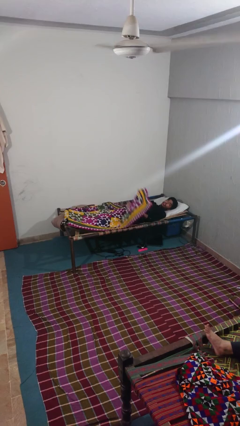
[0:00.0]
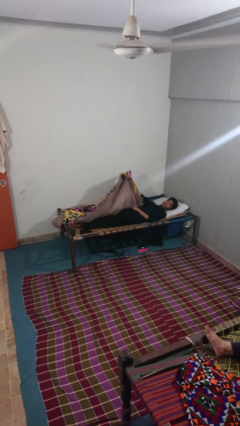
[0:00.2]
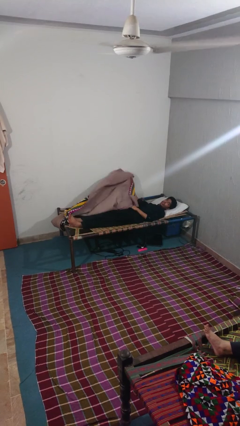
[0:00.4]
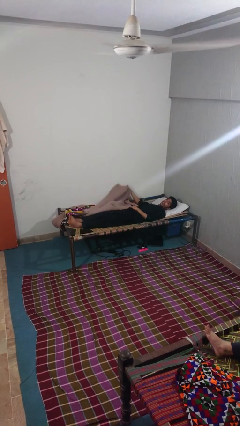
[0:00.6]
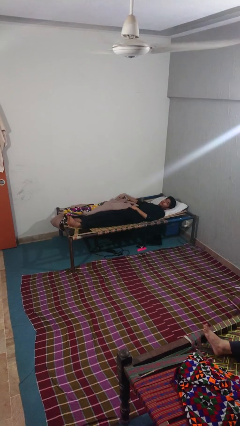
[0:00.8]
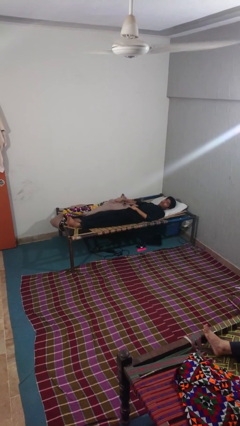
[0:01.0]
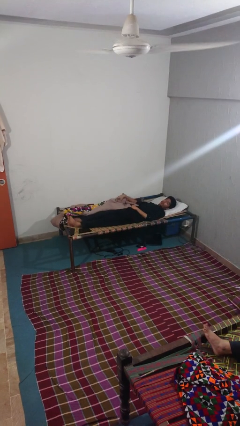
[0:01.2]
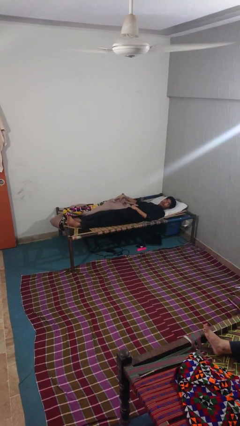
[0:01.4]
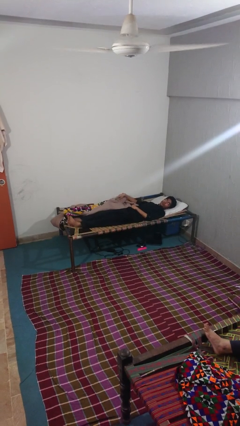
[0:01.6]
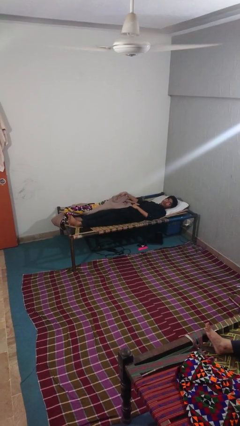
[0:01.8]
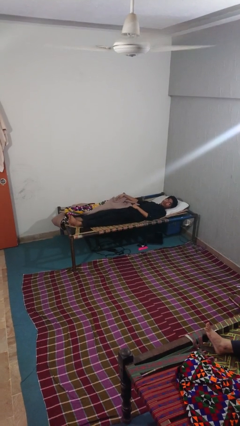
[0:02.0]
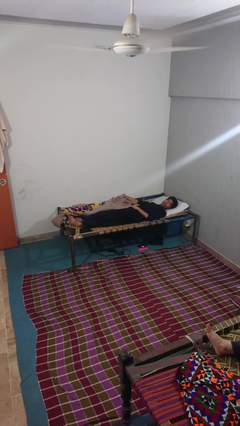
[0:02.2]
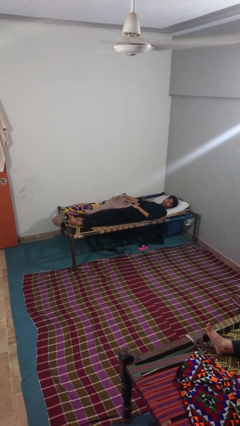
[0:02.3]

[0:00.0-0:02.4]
person uncovers with bedsheets

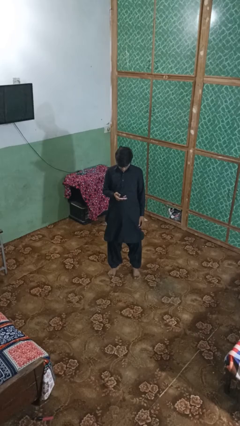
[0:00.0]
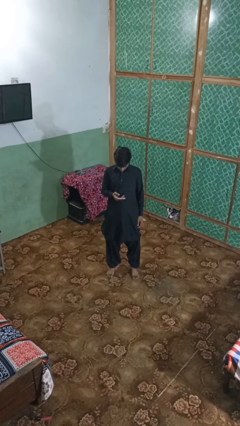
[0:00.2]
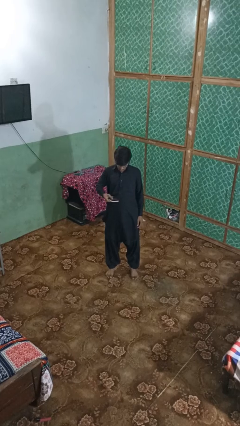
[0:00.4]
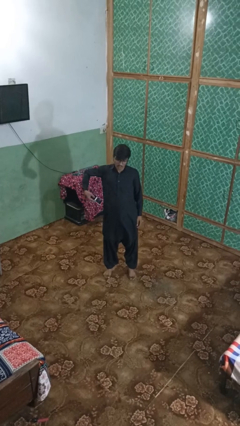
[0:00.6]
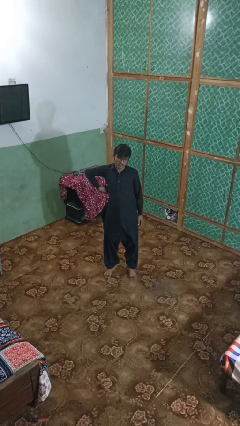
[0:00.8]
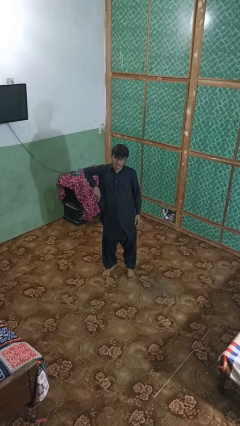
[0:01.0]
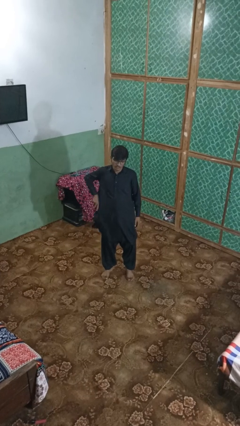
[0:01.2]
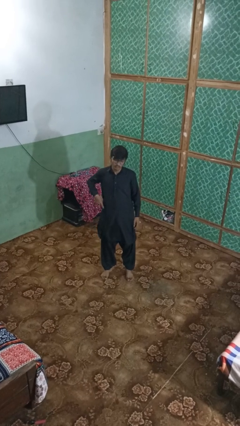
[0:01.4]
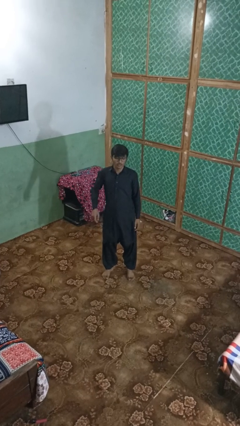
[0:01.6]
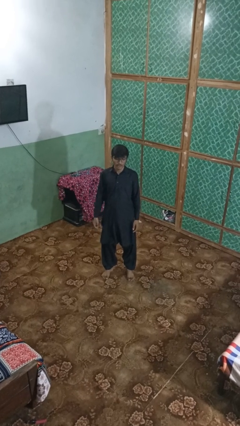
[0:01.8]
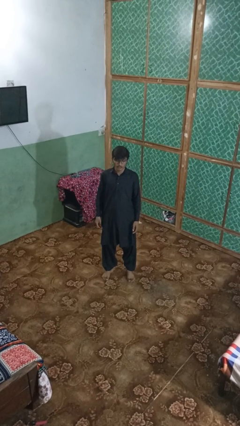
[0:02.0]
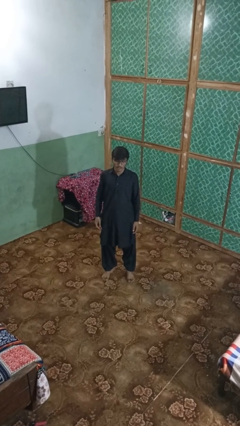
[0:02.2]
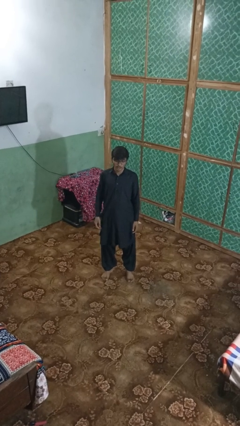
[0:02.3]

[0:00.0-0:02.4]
person puts phone into pocket

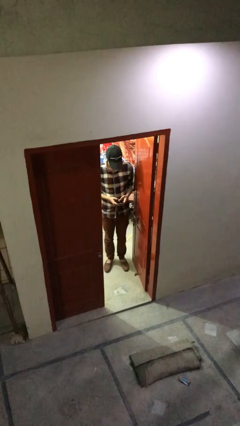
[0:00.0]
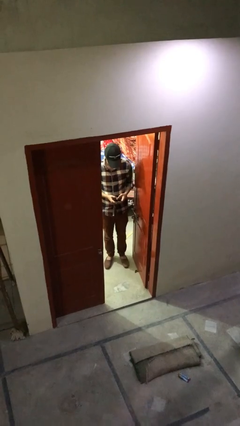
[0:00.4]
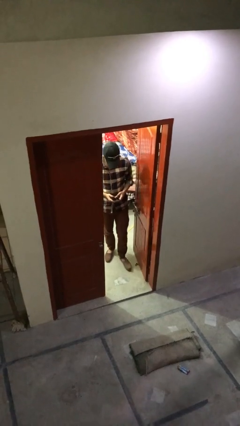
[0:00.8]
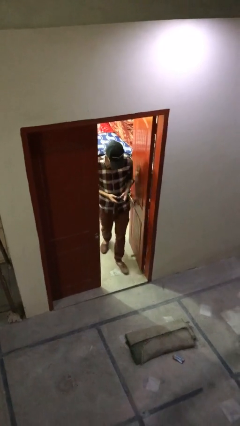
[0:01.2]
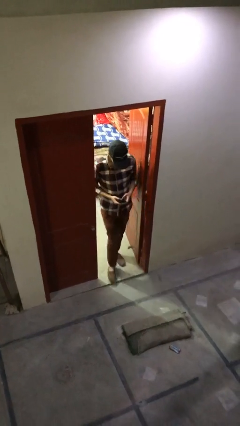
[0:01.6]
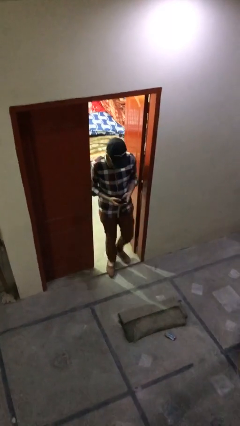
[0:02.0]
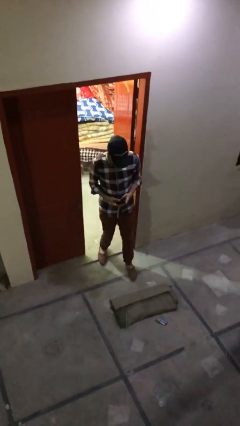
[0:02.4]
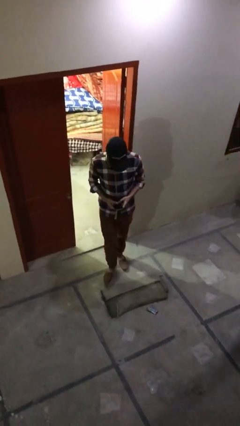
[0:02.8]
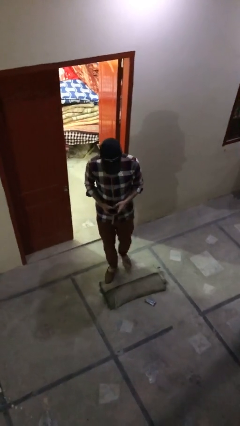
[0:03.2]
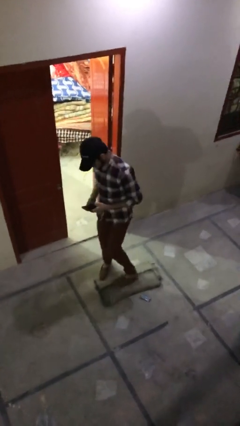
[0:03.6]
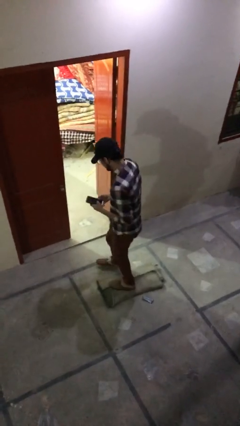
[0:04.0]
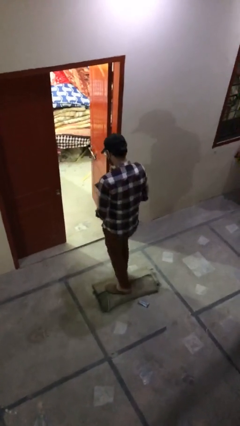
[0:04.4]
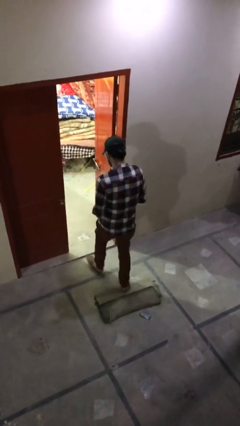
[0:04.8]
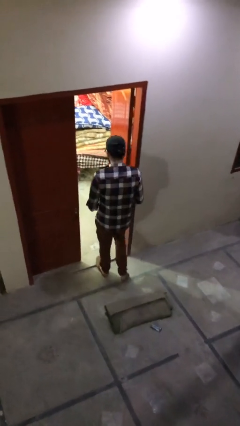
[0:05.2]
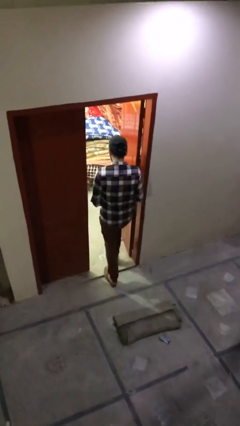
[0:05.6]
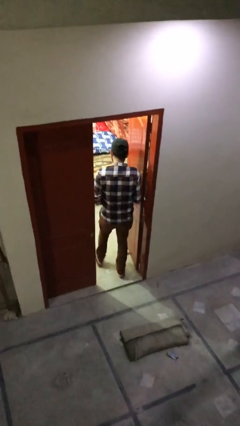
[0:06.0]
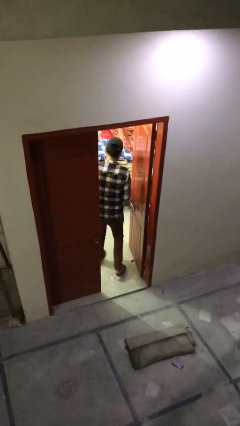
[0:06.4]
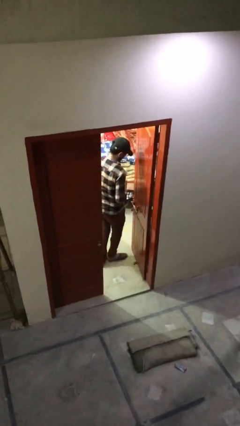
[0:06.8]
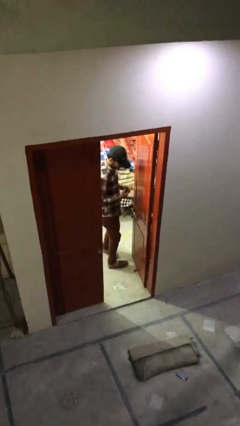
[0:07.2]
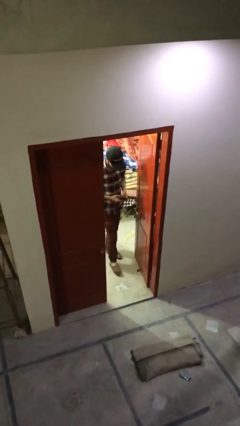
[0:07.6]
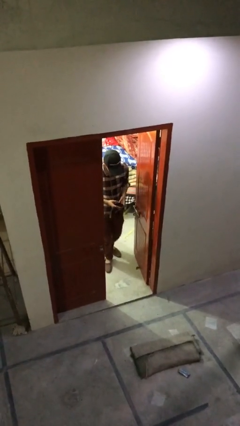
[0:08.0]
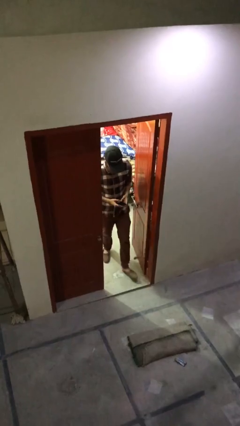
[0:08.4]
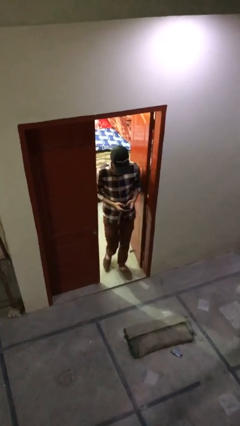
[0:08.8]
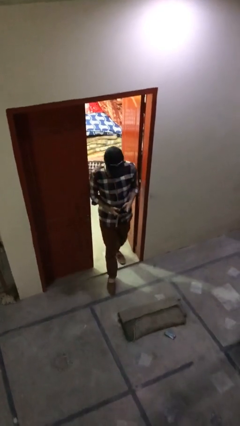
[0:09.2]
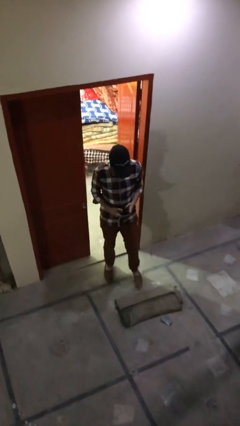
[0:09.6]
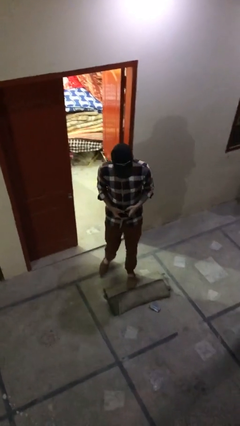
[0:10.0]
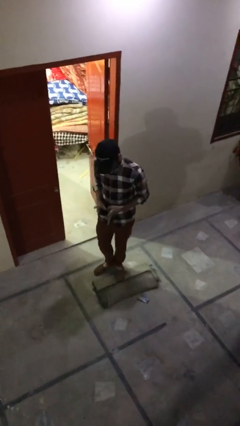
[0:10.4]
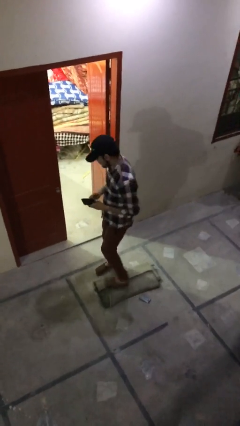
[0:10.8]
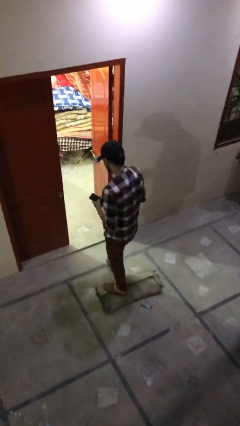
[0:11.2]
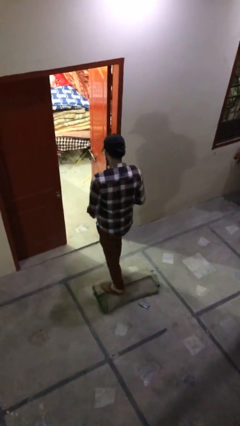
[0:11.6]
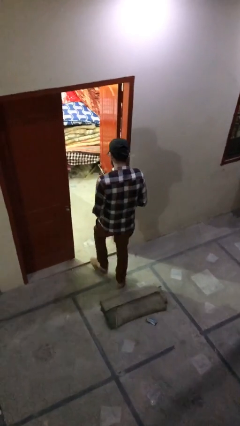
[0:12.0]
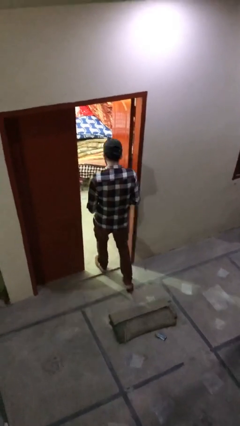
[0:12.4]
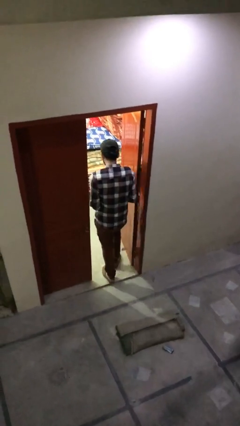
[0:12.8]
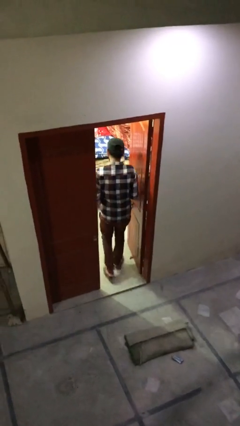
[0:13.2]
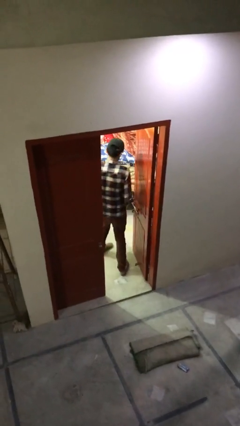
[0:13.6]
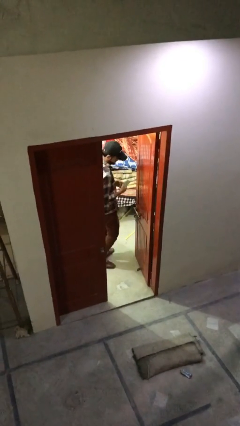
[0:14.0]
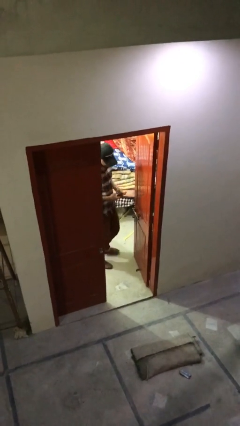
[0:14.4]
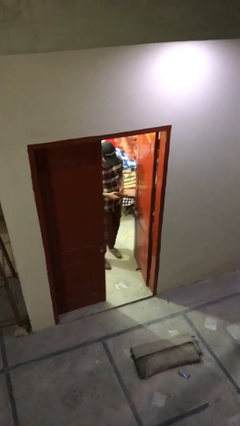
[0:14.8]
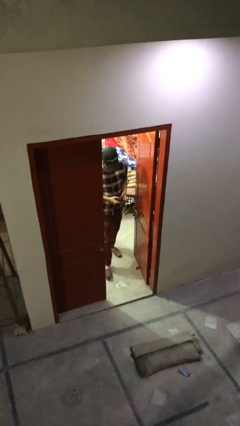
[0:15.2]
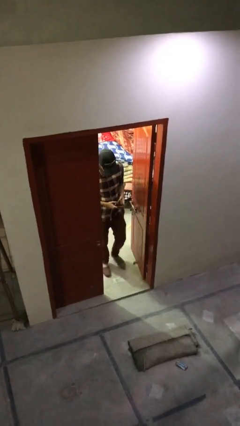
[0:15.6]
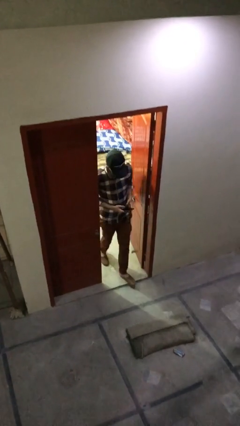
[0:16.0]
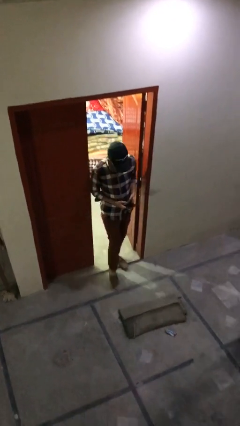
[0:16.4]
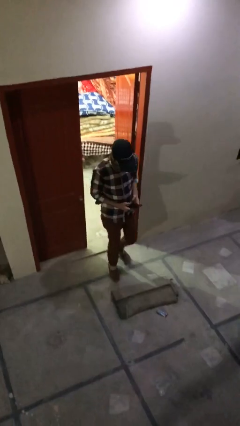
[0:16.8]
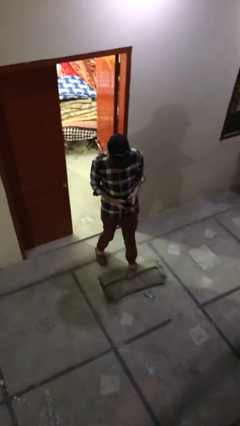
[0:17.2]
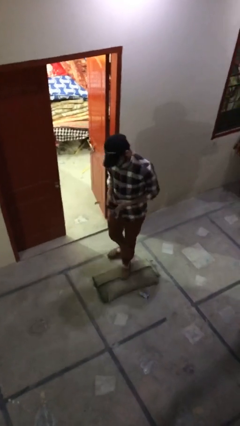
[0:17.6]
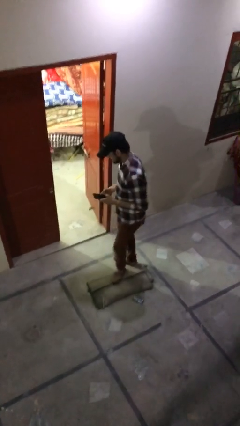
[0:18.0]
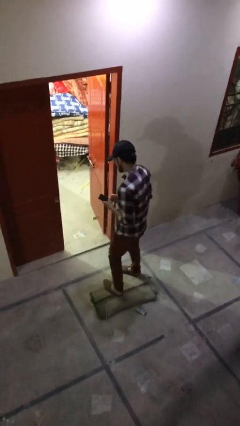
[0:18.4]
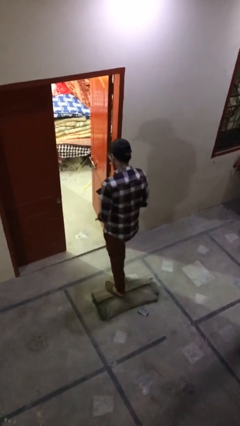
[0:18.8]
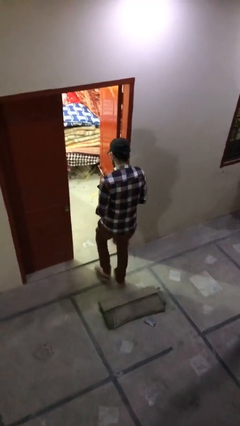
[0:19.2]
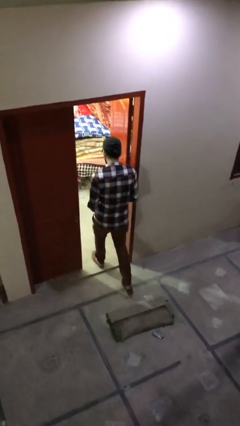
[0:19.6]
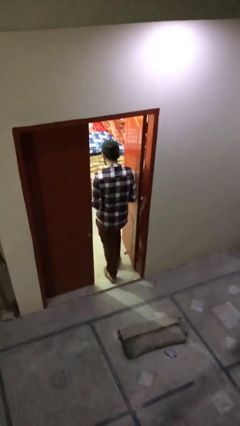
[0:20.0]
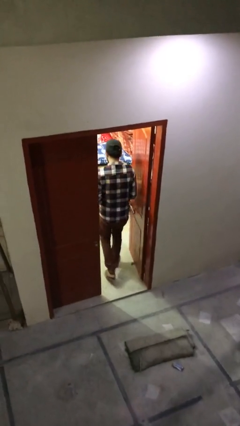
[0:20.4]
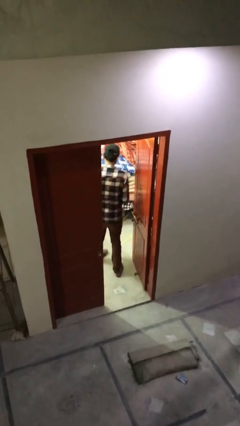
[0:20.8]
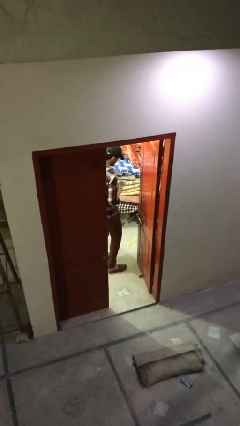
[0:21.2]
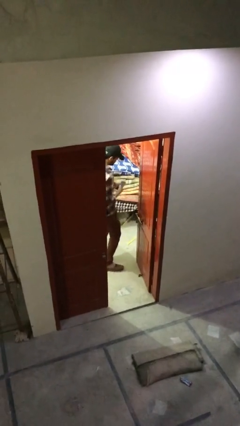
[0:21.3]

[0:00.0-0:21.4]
person texts on phone

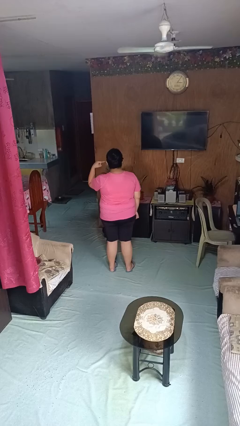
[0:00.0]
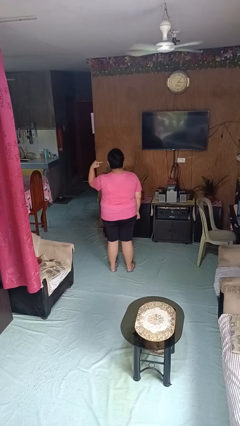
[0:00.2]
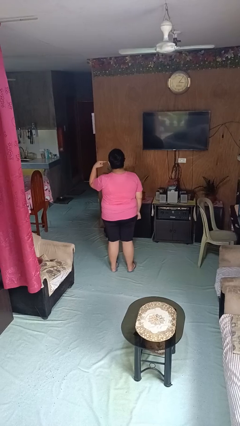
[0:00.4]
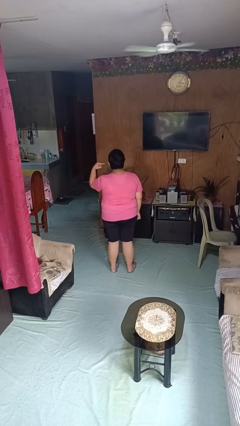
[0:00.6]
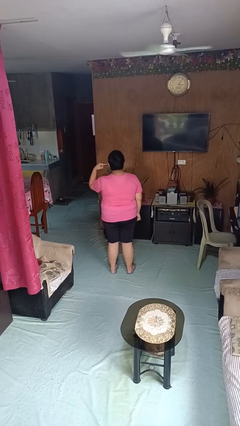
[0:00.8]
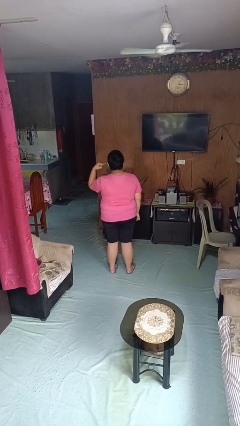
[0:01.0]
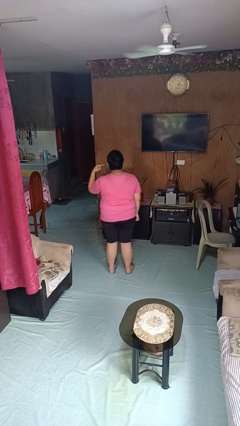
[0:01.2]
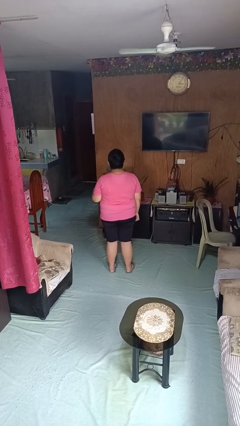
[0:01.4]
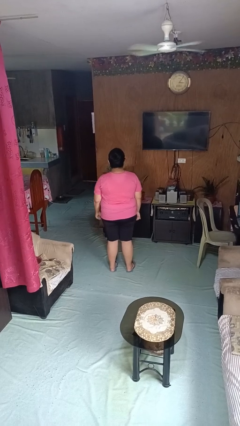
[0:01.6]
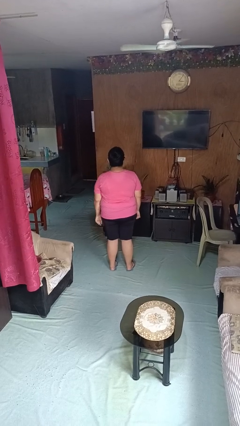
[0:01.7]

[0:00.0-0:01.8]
person gestures listen closely

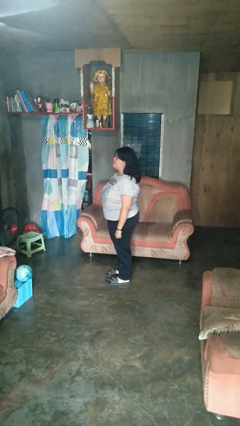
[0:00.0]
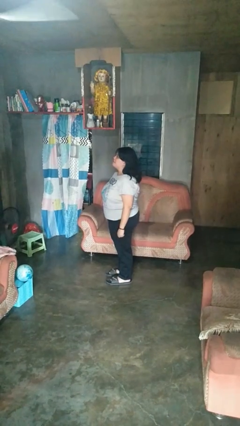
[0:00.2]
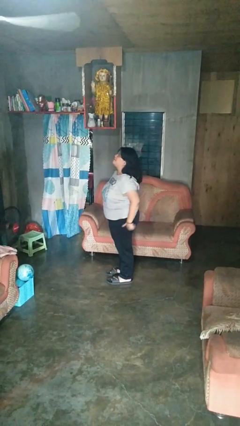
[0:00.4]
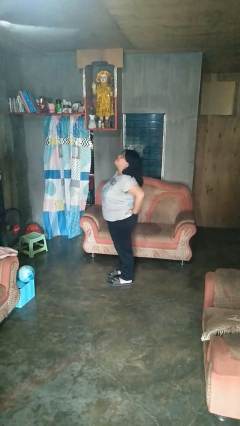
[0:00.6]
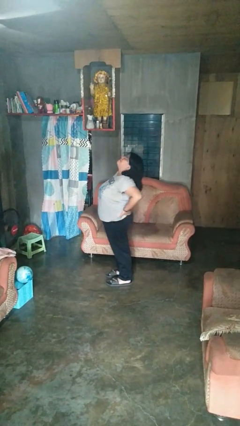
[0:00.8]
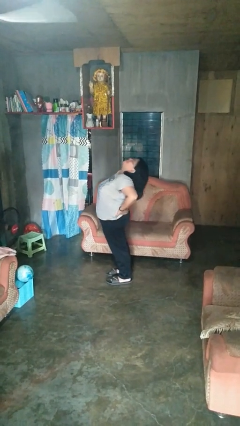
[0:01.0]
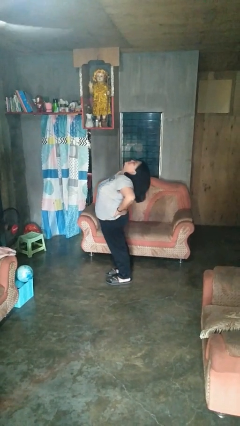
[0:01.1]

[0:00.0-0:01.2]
person stretches back
